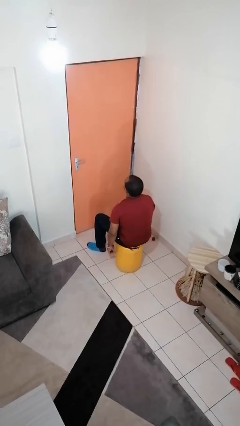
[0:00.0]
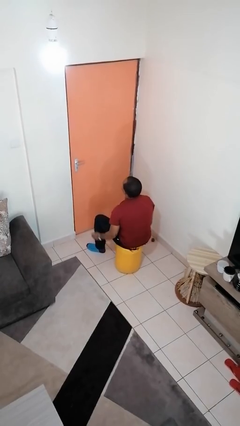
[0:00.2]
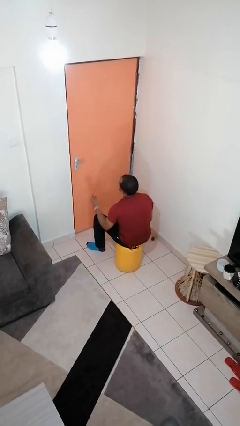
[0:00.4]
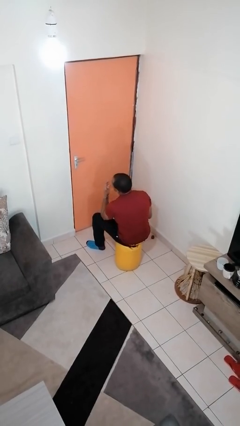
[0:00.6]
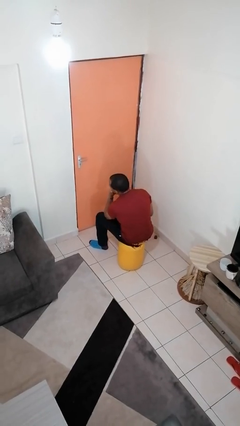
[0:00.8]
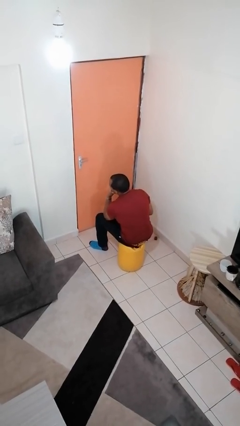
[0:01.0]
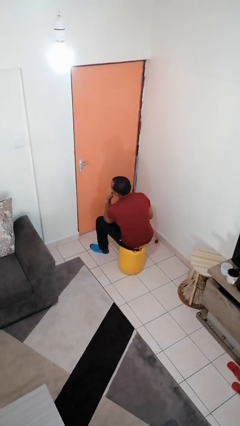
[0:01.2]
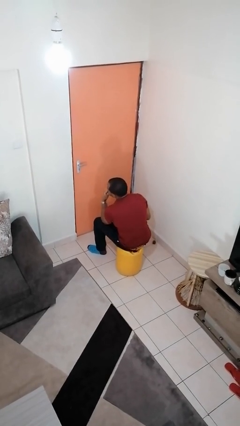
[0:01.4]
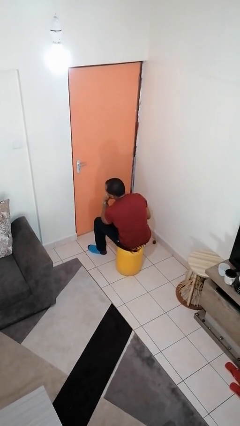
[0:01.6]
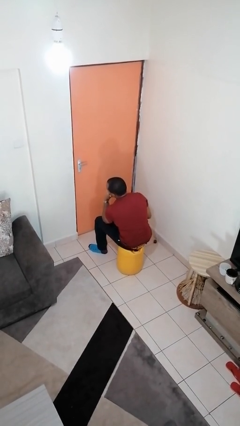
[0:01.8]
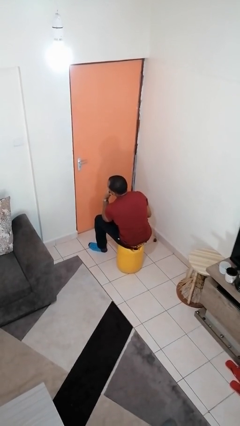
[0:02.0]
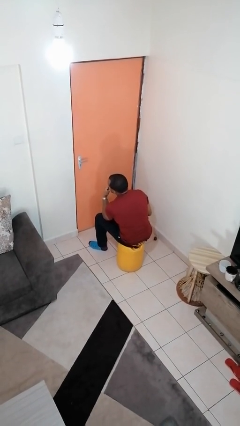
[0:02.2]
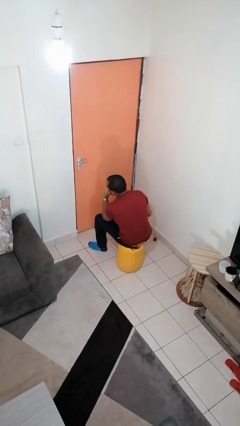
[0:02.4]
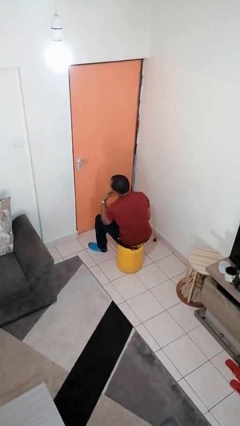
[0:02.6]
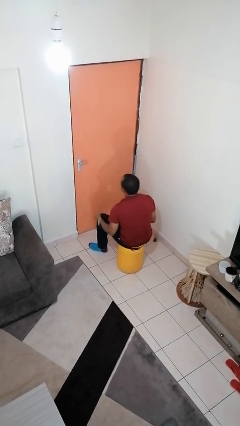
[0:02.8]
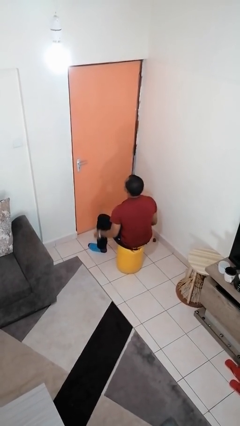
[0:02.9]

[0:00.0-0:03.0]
person strokes chin

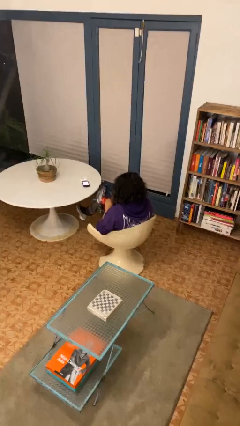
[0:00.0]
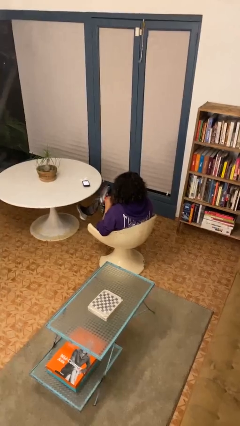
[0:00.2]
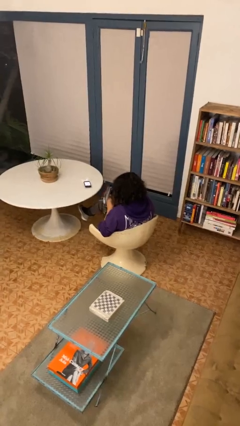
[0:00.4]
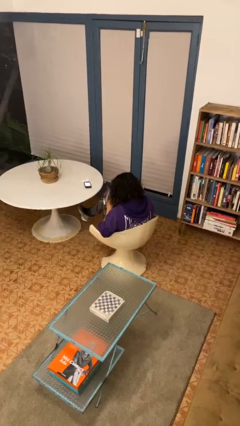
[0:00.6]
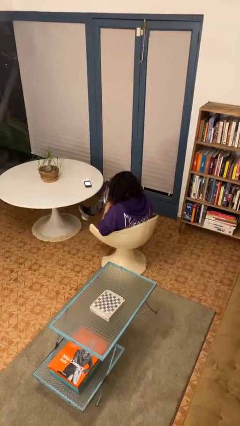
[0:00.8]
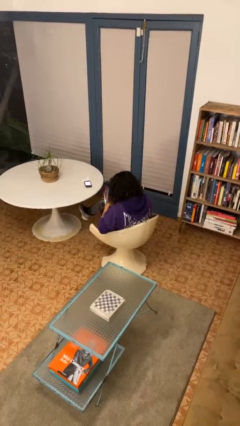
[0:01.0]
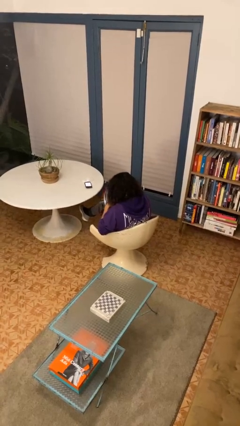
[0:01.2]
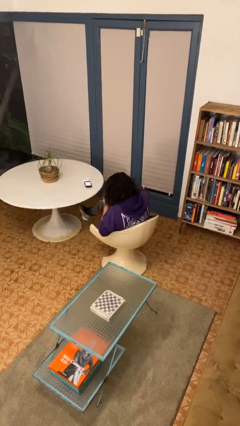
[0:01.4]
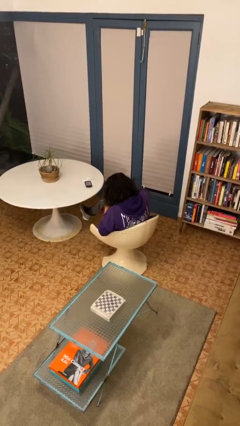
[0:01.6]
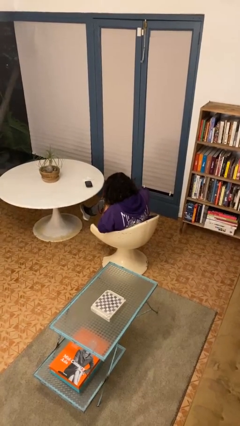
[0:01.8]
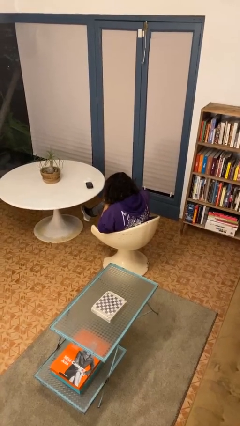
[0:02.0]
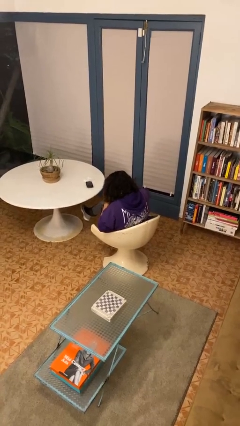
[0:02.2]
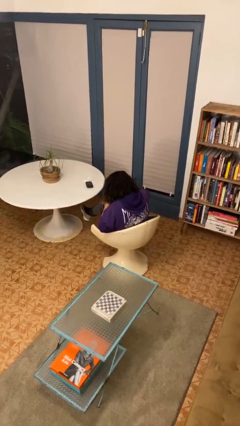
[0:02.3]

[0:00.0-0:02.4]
person searches in bag

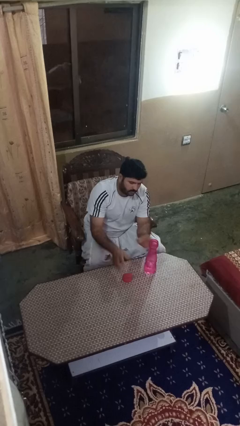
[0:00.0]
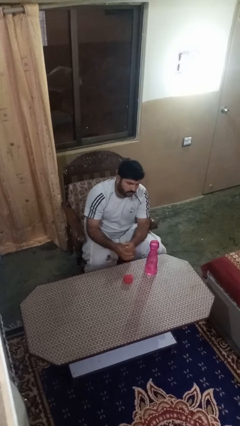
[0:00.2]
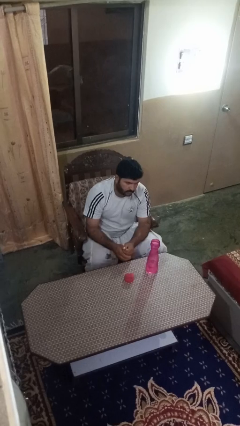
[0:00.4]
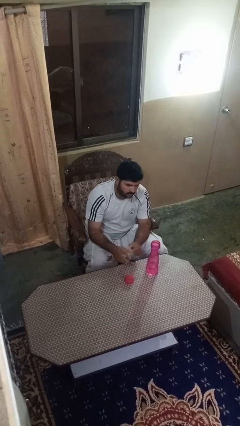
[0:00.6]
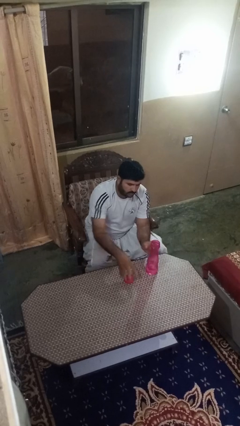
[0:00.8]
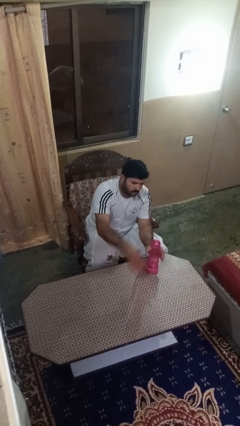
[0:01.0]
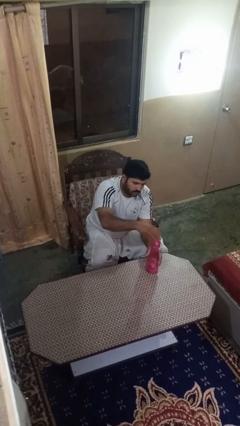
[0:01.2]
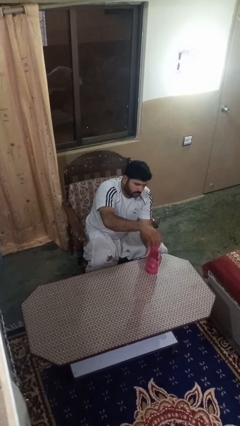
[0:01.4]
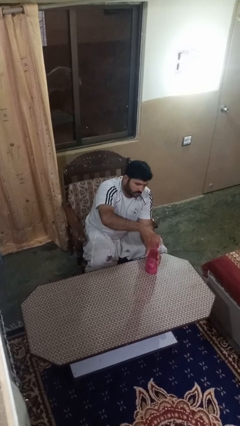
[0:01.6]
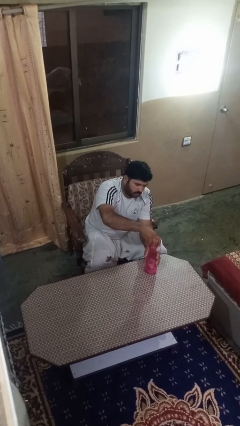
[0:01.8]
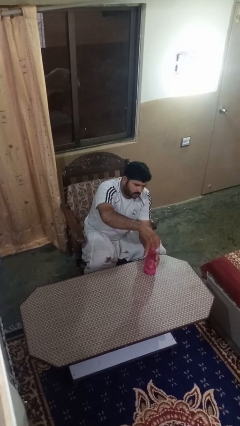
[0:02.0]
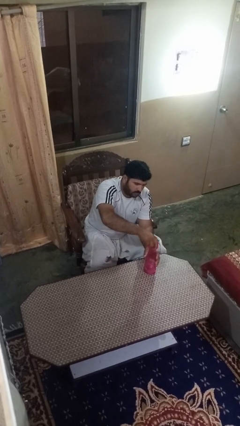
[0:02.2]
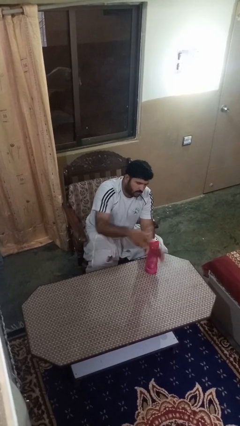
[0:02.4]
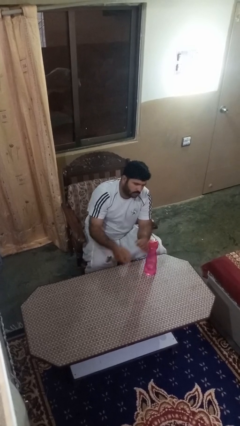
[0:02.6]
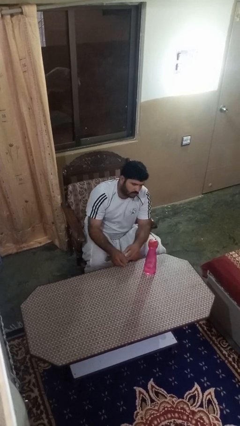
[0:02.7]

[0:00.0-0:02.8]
person screws lid to bottle

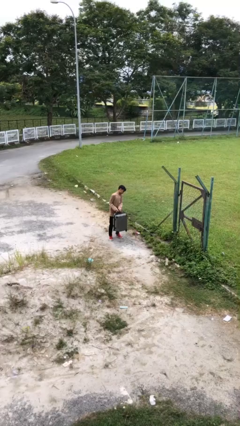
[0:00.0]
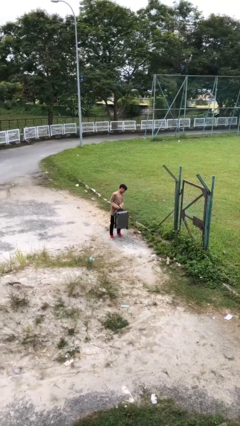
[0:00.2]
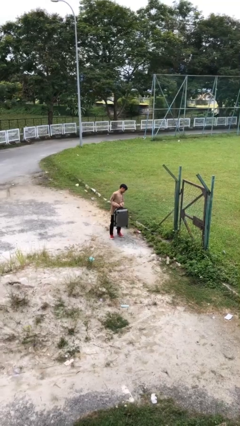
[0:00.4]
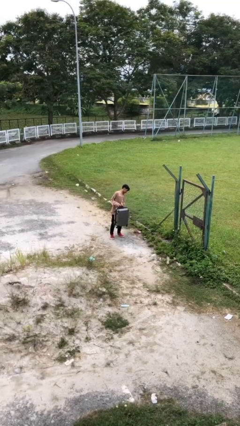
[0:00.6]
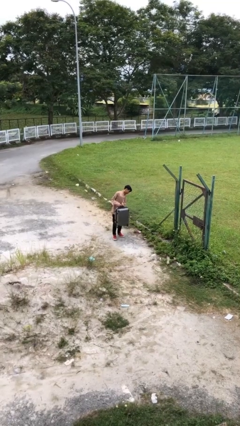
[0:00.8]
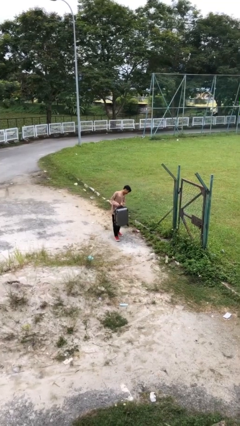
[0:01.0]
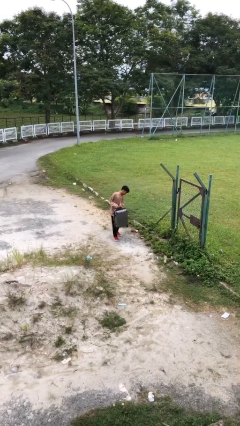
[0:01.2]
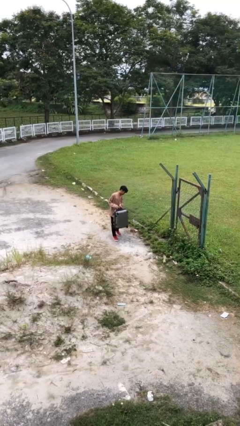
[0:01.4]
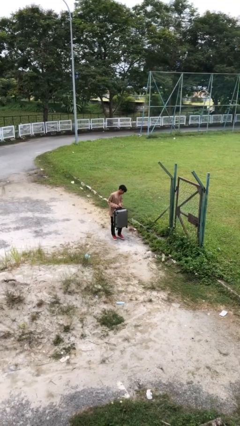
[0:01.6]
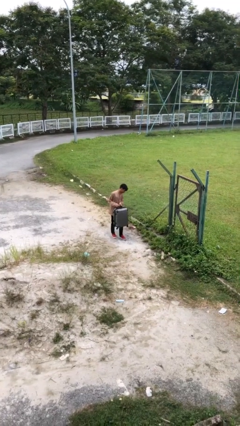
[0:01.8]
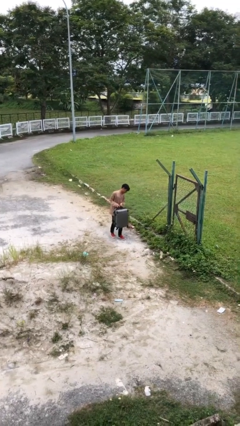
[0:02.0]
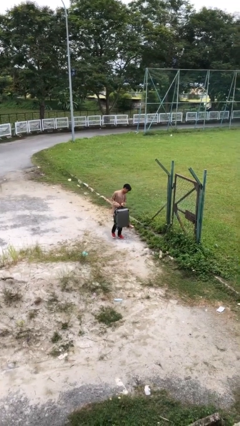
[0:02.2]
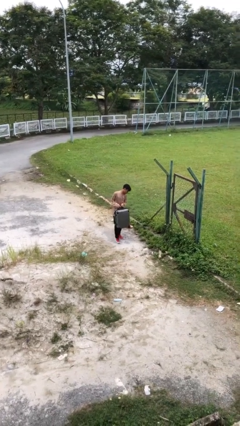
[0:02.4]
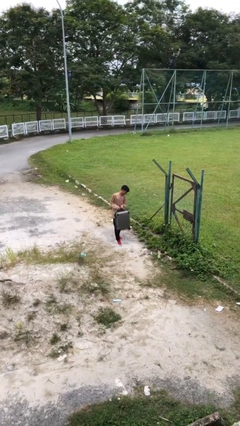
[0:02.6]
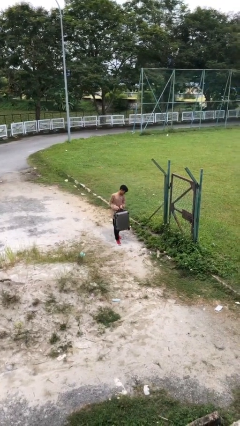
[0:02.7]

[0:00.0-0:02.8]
person carries heavy object

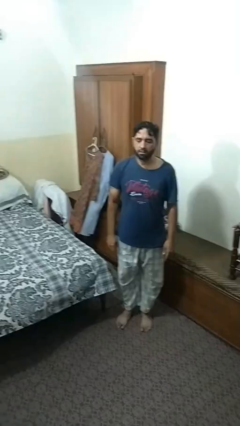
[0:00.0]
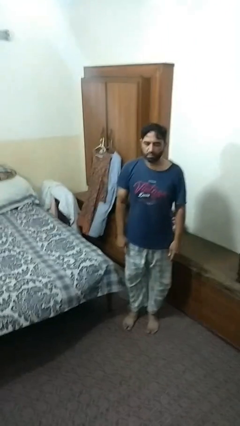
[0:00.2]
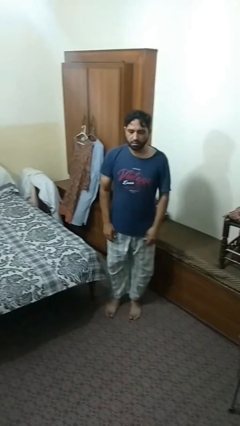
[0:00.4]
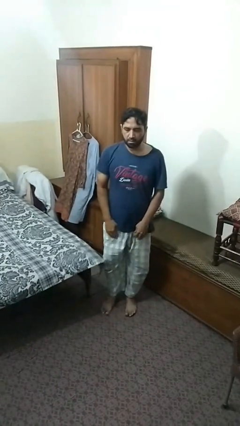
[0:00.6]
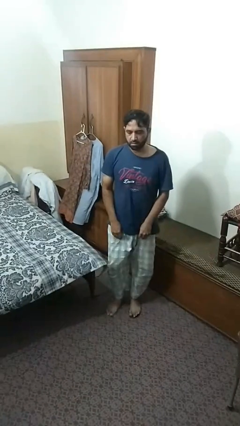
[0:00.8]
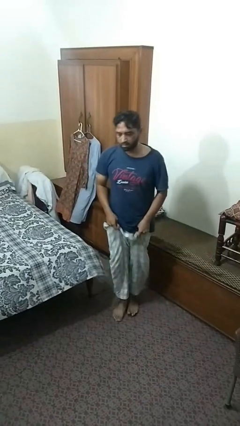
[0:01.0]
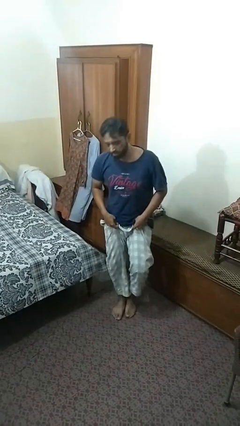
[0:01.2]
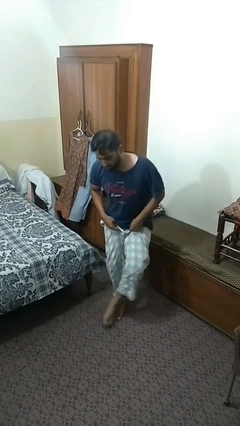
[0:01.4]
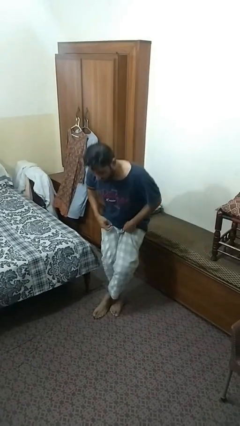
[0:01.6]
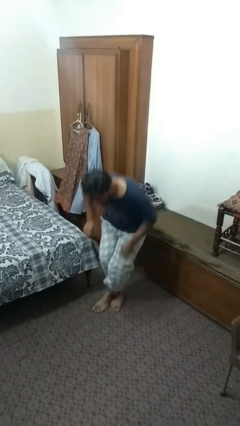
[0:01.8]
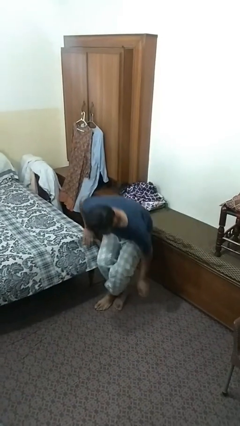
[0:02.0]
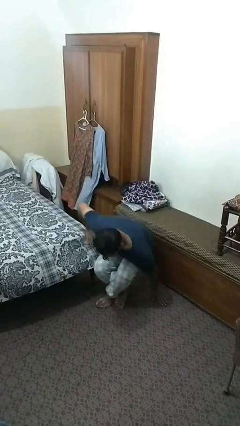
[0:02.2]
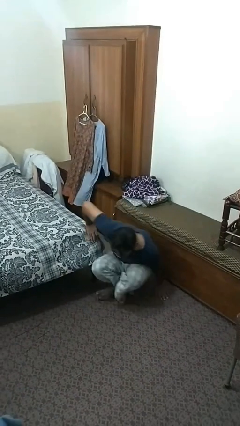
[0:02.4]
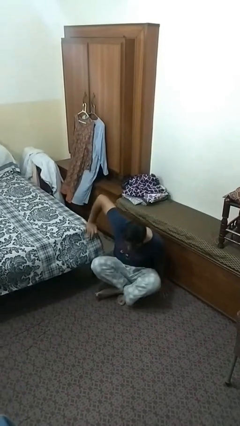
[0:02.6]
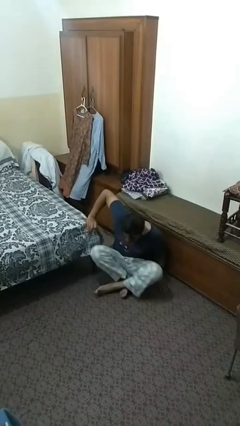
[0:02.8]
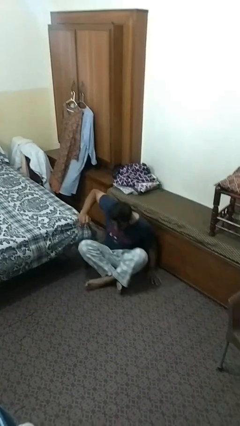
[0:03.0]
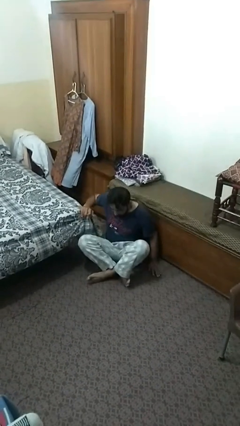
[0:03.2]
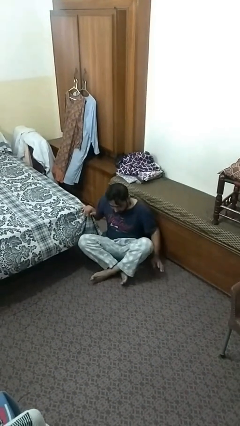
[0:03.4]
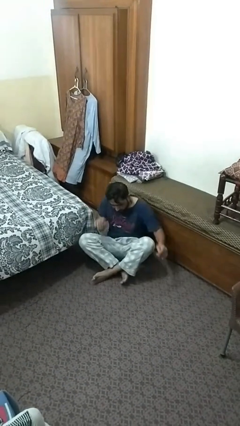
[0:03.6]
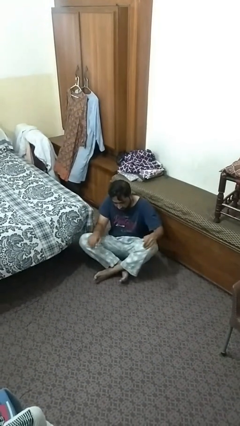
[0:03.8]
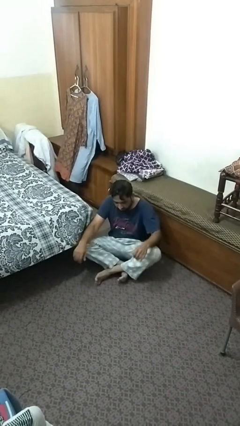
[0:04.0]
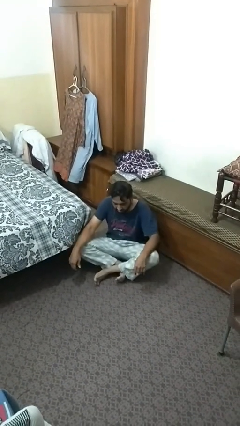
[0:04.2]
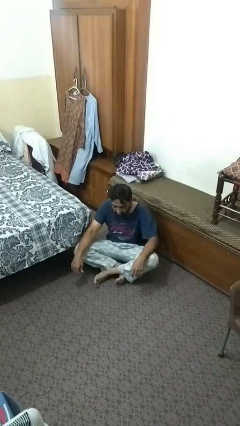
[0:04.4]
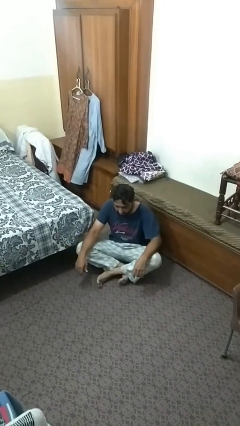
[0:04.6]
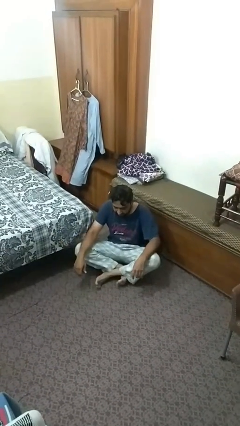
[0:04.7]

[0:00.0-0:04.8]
person sits crisscross

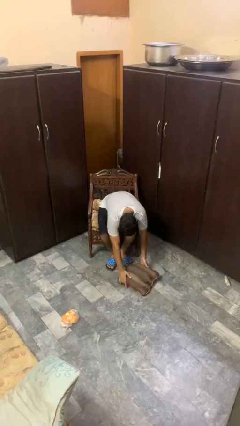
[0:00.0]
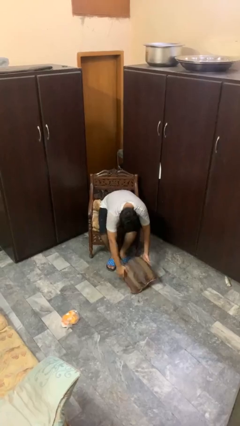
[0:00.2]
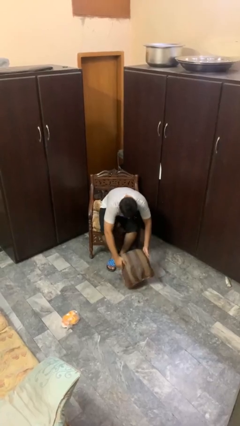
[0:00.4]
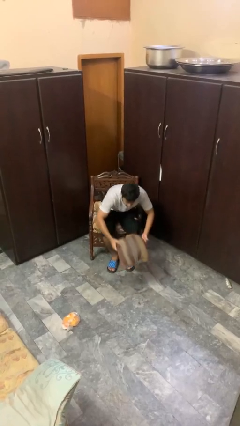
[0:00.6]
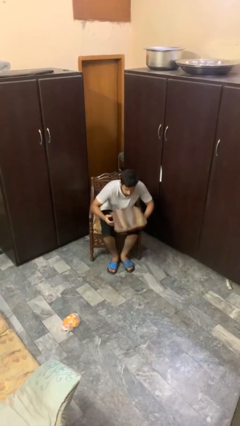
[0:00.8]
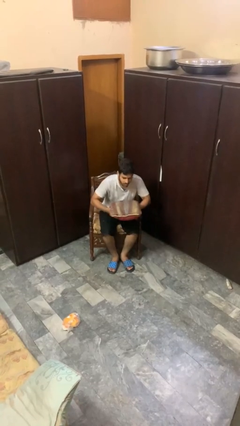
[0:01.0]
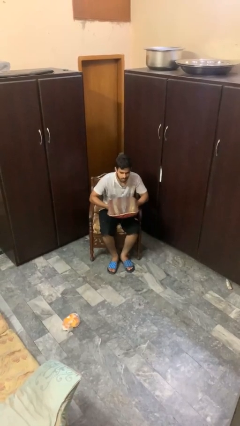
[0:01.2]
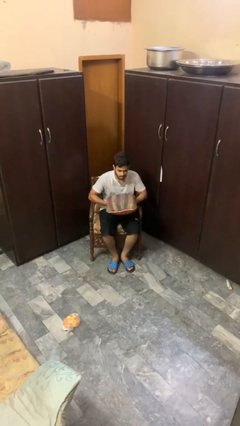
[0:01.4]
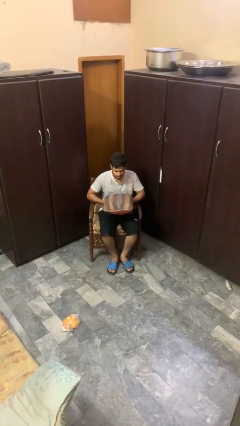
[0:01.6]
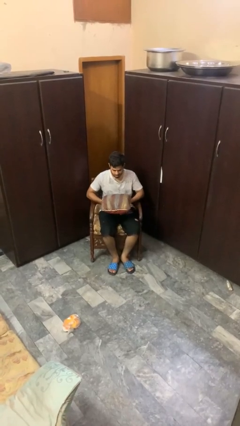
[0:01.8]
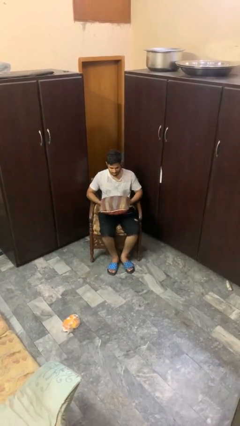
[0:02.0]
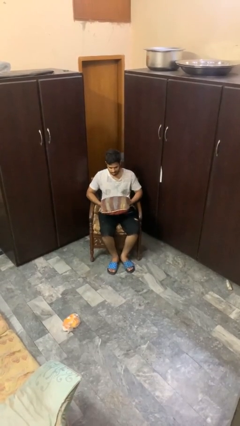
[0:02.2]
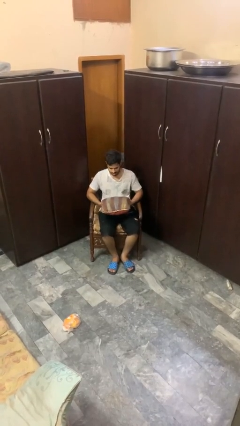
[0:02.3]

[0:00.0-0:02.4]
person picks up object from floor
